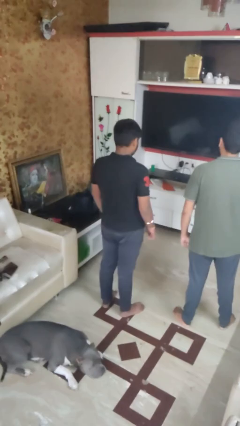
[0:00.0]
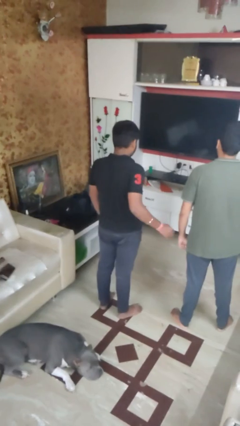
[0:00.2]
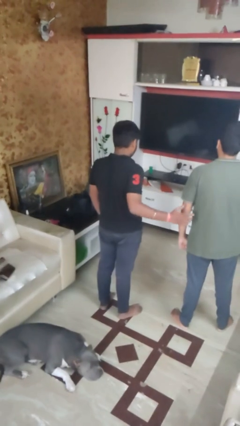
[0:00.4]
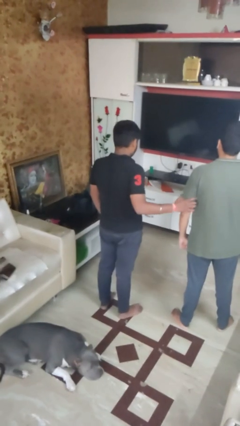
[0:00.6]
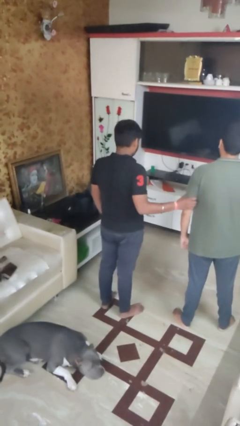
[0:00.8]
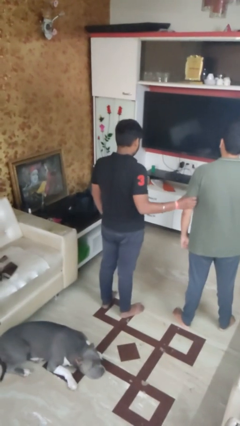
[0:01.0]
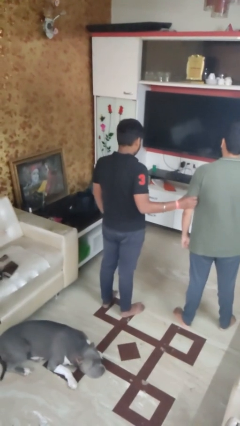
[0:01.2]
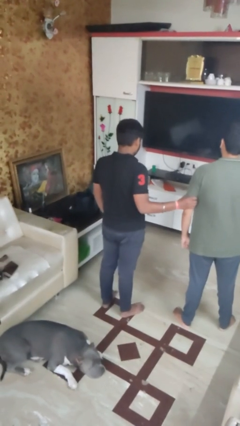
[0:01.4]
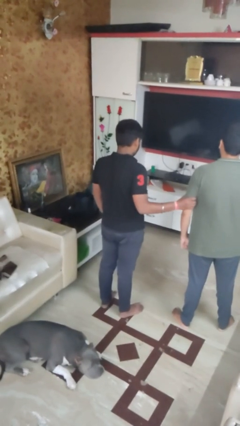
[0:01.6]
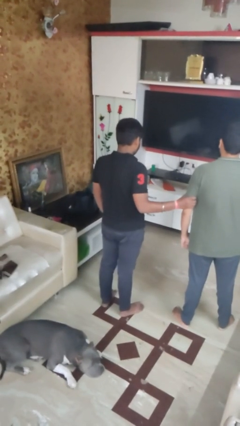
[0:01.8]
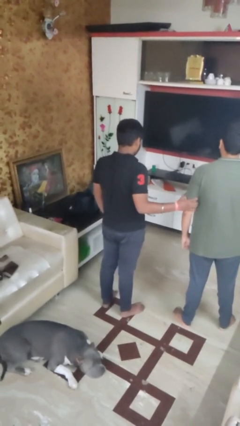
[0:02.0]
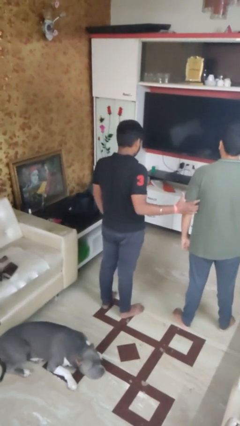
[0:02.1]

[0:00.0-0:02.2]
person grabs person by bicep

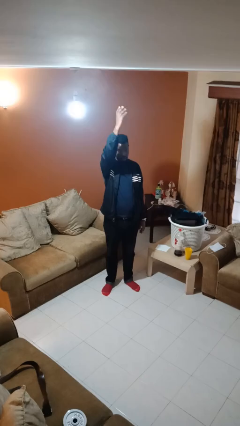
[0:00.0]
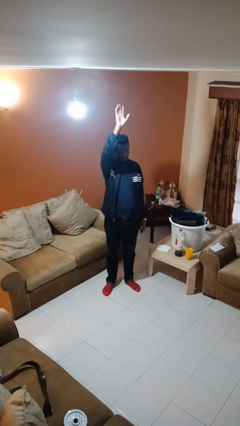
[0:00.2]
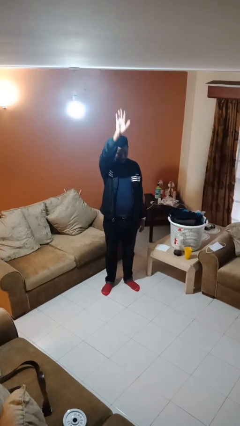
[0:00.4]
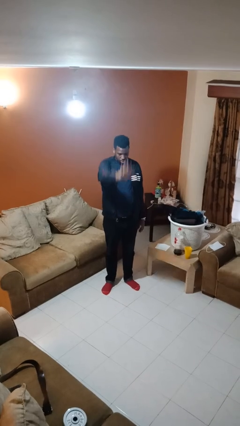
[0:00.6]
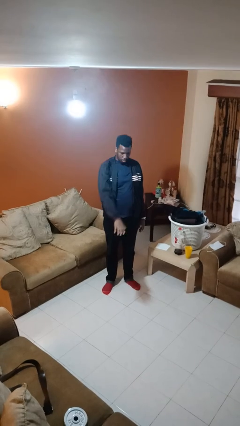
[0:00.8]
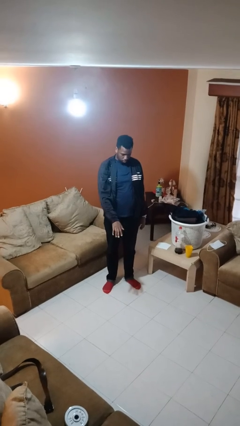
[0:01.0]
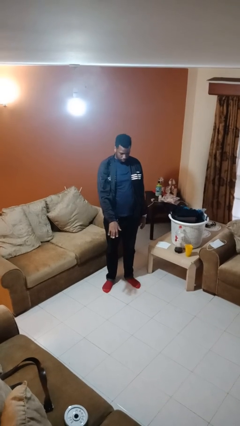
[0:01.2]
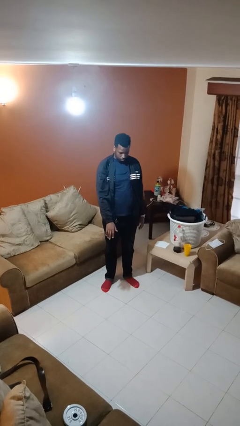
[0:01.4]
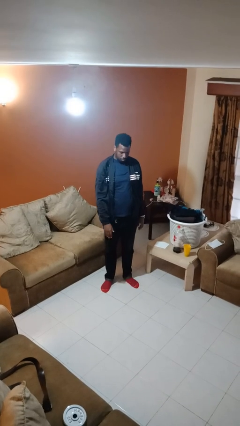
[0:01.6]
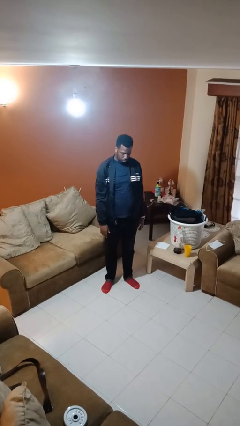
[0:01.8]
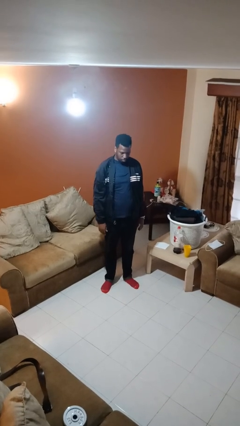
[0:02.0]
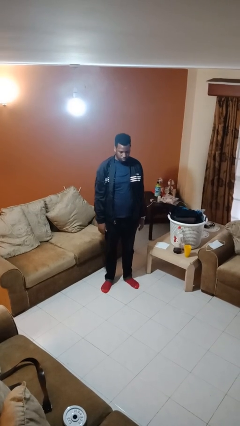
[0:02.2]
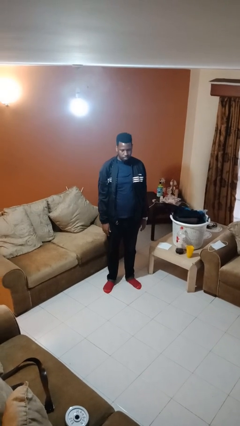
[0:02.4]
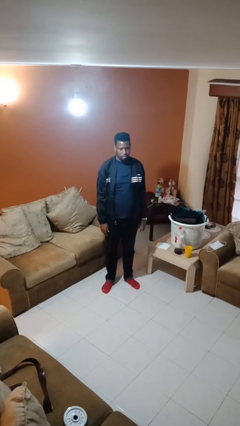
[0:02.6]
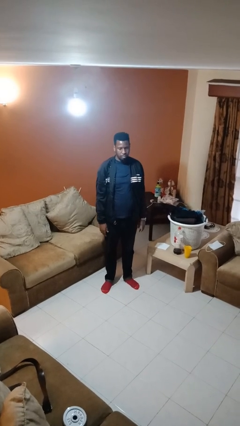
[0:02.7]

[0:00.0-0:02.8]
person gestures swipe down

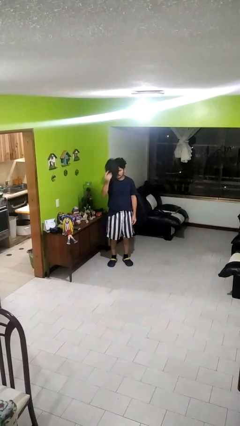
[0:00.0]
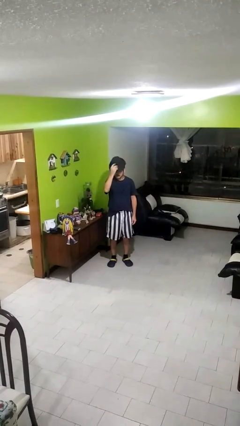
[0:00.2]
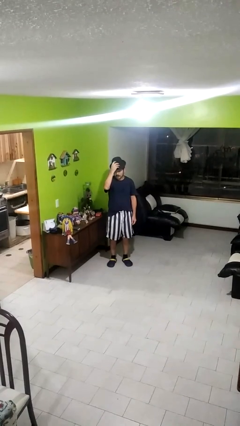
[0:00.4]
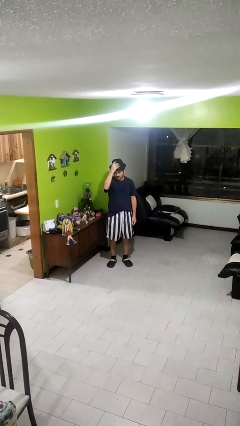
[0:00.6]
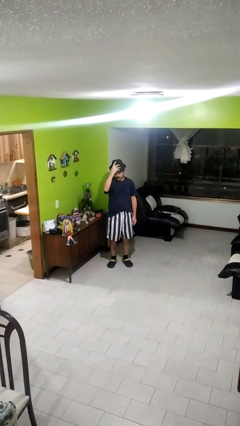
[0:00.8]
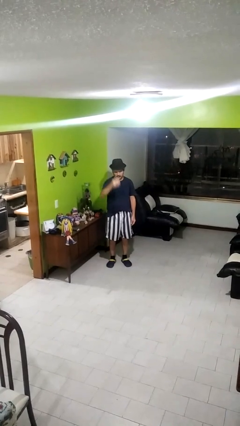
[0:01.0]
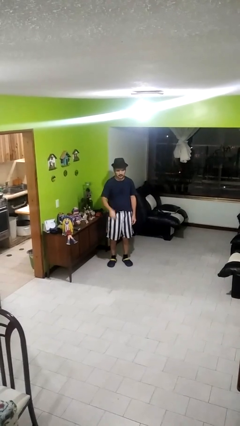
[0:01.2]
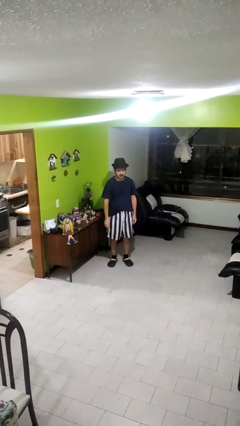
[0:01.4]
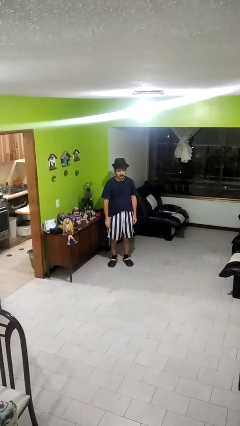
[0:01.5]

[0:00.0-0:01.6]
person puts on hat

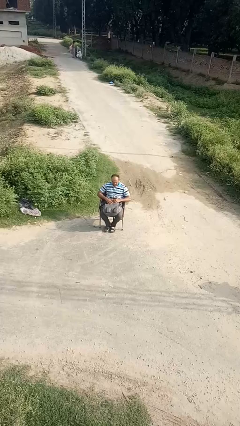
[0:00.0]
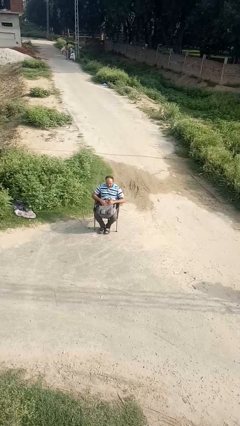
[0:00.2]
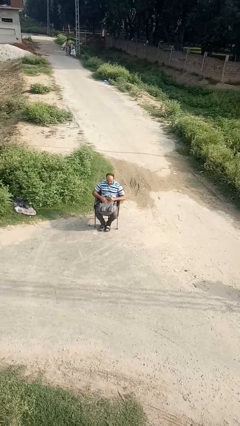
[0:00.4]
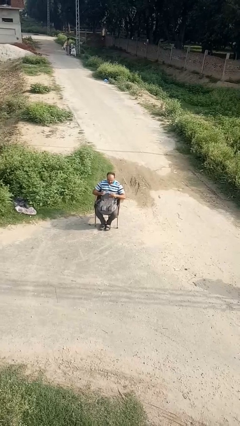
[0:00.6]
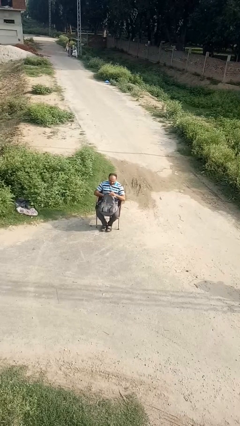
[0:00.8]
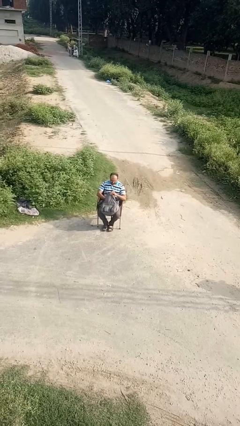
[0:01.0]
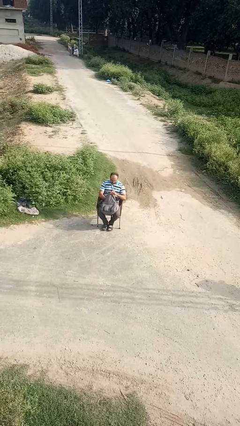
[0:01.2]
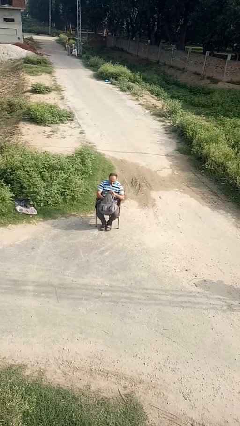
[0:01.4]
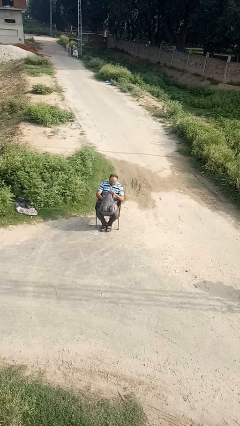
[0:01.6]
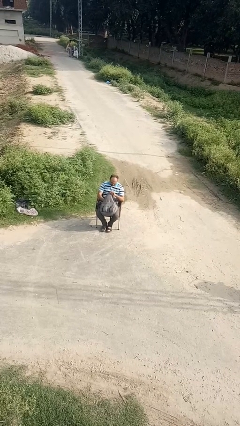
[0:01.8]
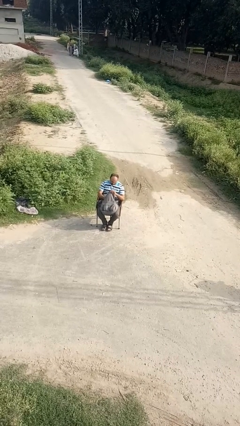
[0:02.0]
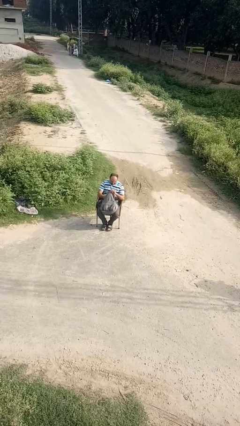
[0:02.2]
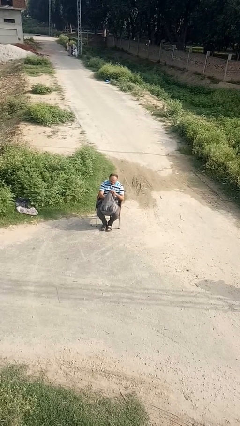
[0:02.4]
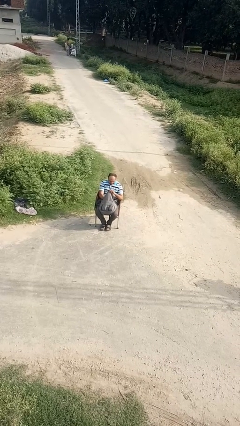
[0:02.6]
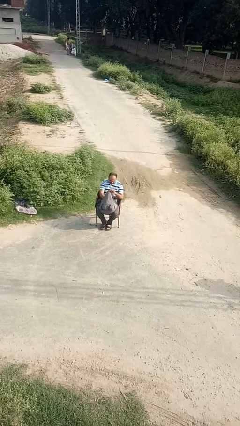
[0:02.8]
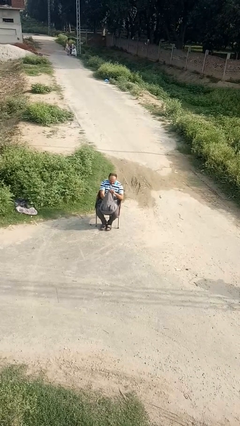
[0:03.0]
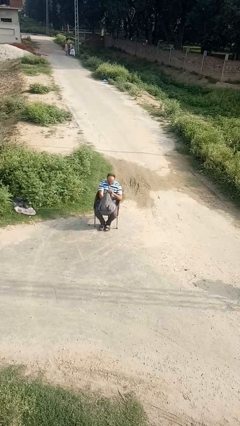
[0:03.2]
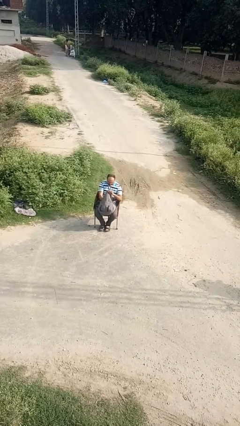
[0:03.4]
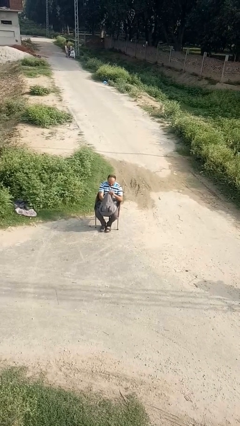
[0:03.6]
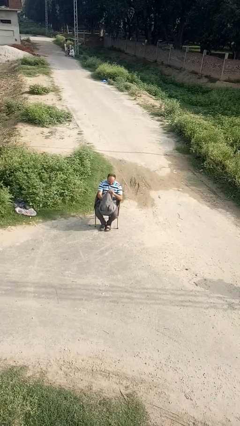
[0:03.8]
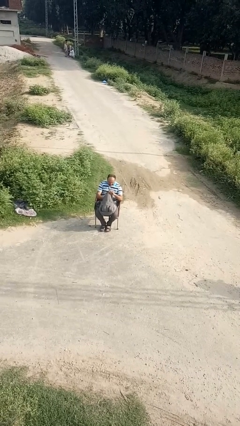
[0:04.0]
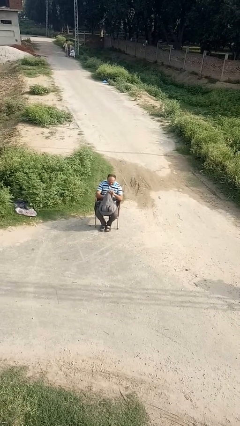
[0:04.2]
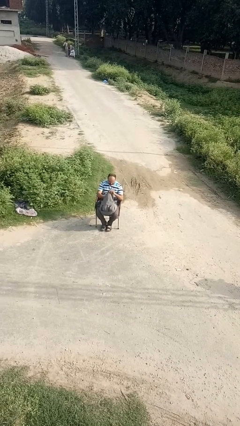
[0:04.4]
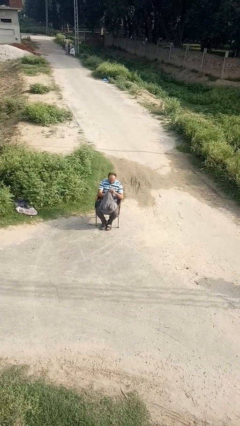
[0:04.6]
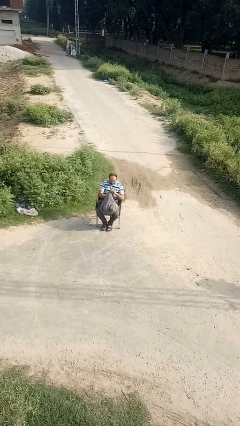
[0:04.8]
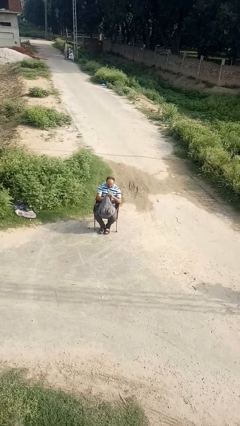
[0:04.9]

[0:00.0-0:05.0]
person searches in backpack

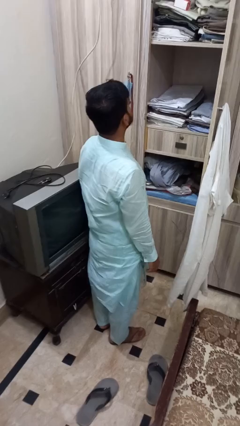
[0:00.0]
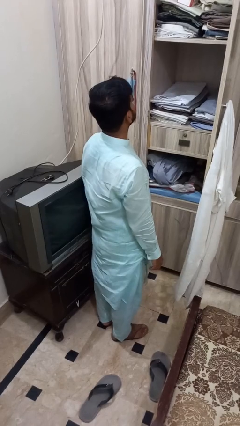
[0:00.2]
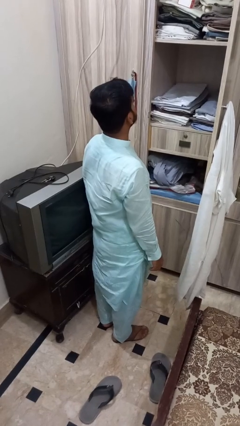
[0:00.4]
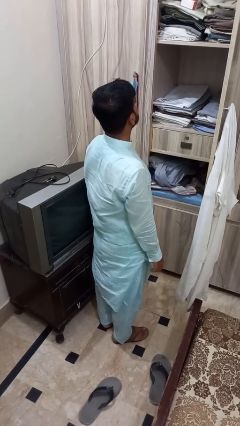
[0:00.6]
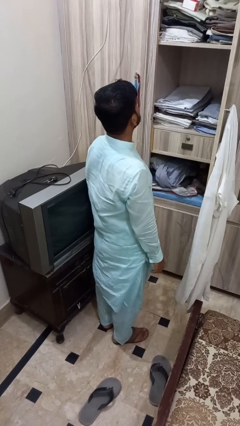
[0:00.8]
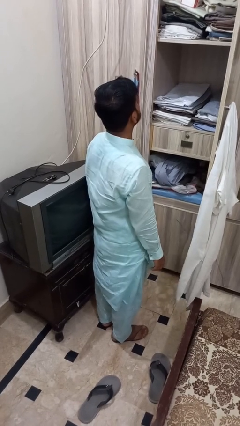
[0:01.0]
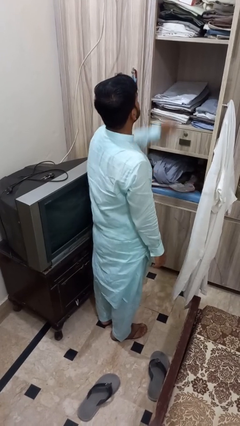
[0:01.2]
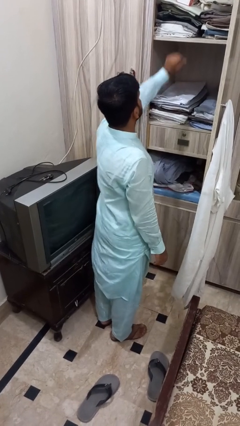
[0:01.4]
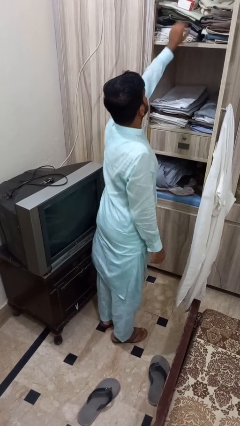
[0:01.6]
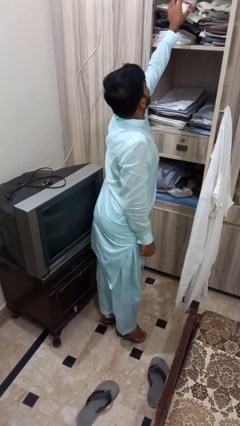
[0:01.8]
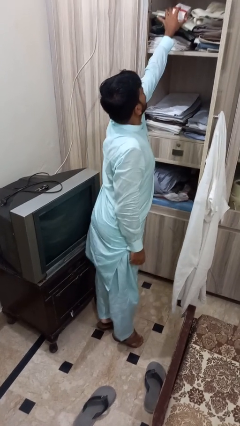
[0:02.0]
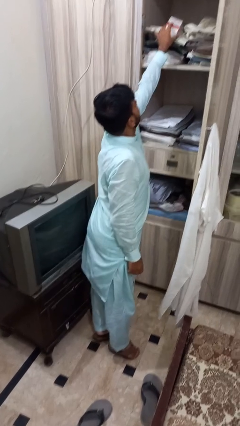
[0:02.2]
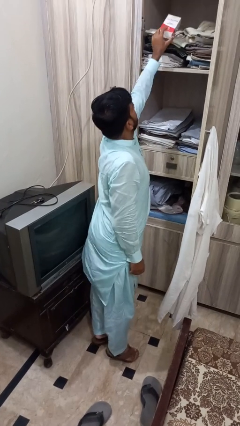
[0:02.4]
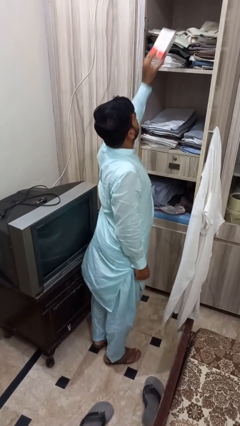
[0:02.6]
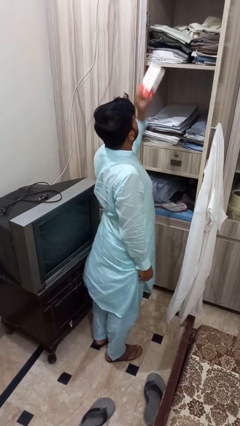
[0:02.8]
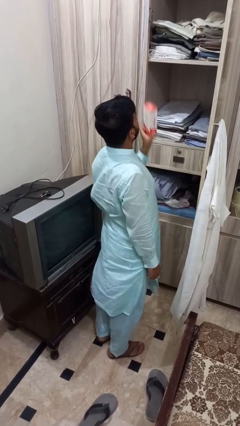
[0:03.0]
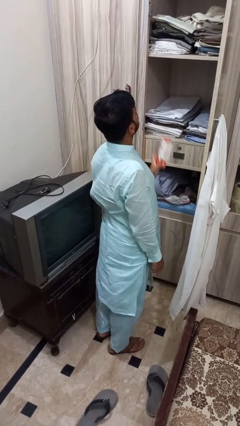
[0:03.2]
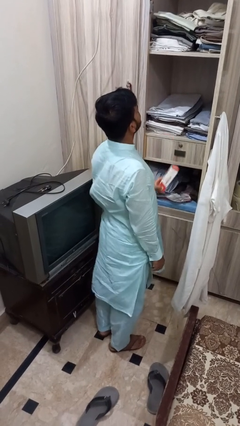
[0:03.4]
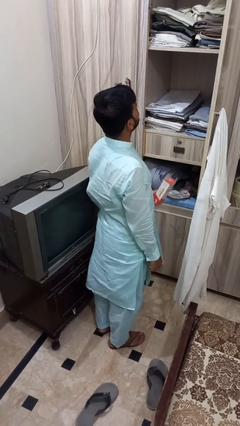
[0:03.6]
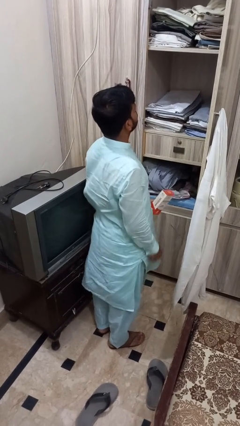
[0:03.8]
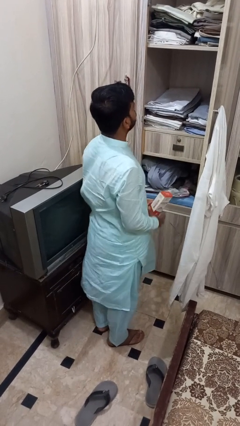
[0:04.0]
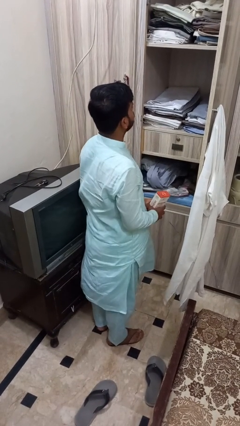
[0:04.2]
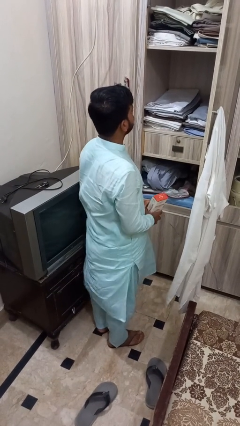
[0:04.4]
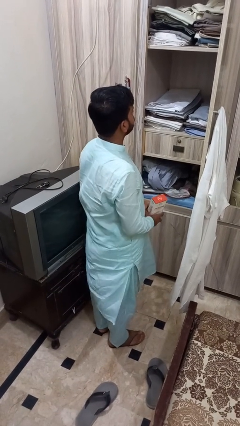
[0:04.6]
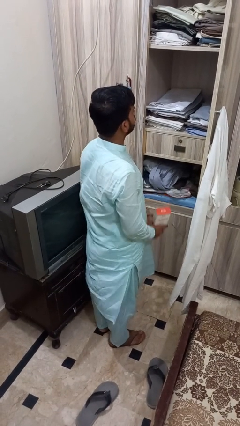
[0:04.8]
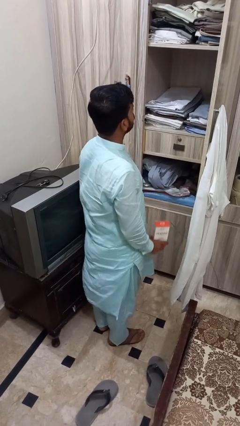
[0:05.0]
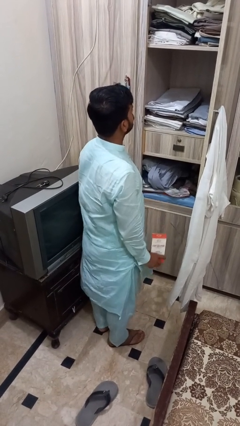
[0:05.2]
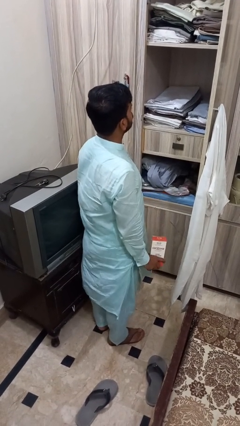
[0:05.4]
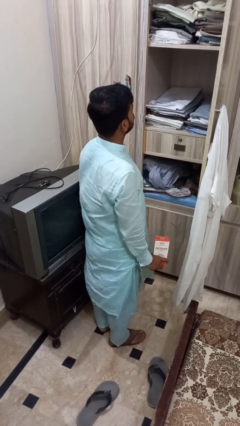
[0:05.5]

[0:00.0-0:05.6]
person picks up object from shelf
